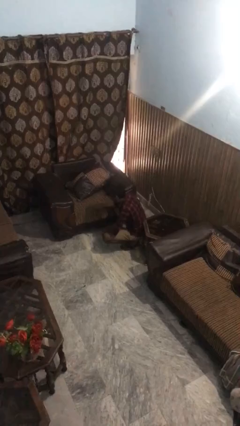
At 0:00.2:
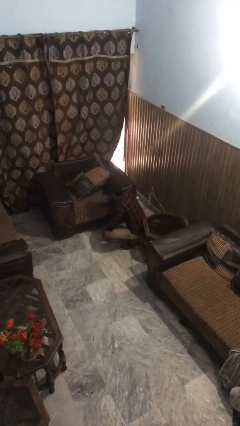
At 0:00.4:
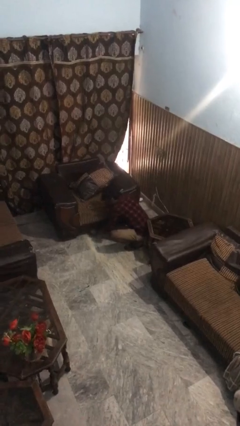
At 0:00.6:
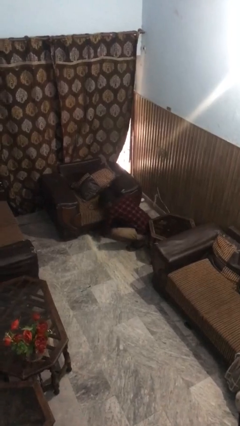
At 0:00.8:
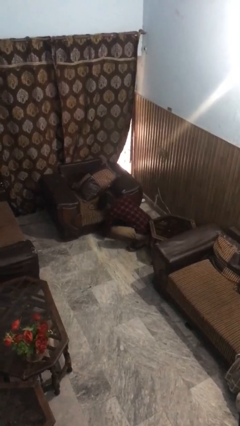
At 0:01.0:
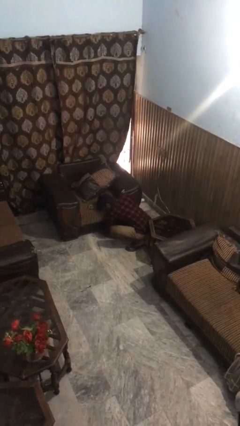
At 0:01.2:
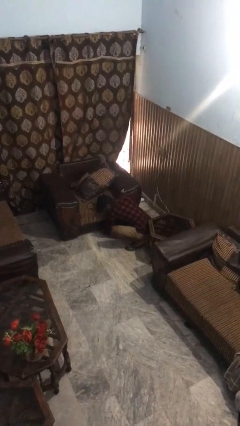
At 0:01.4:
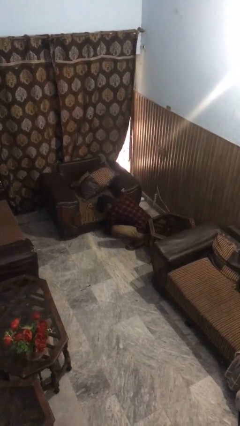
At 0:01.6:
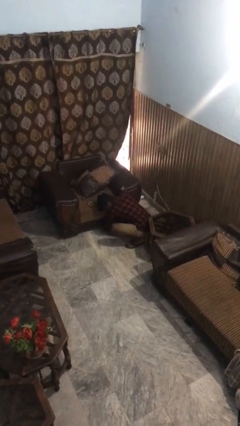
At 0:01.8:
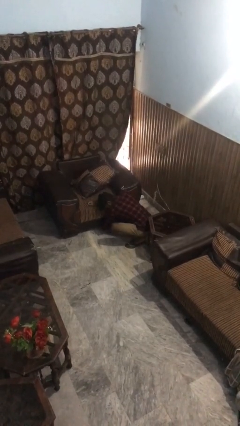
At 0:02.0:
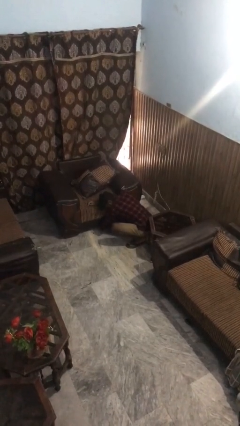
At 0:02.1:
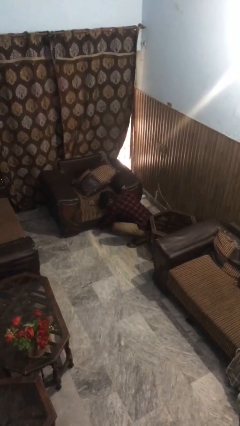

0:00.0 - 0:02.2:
person searches under couch

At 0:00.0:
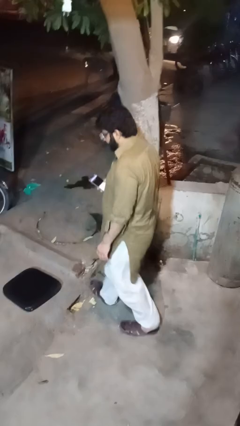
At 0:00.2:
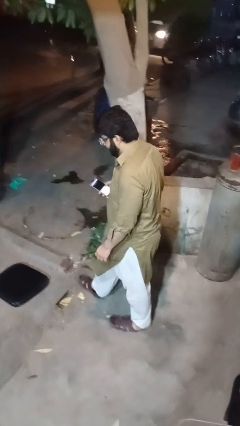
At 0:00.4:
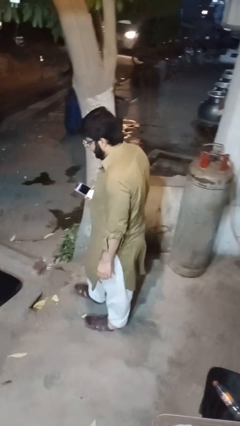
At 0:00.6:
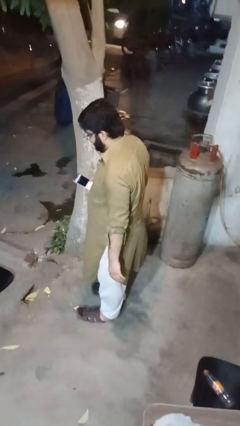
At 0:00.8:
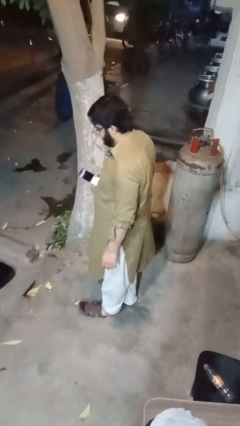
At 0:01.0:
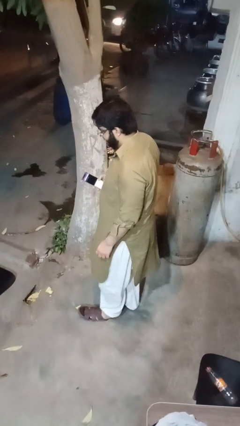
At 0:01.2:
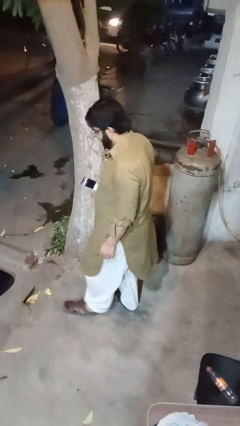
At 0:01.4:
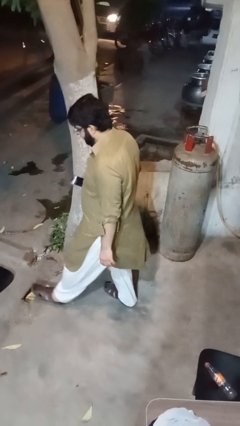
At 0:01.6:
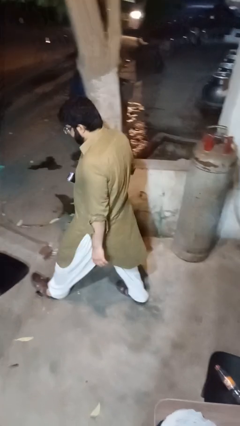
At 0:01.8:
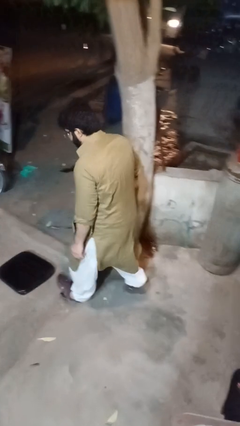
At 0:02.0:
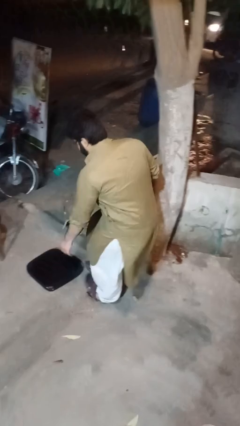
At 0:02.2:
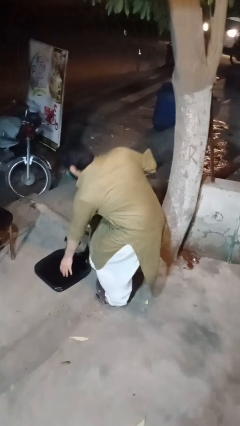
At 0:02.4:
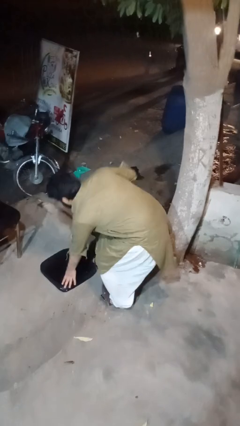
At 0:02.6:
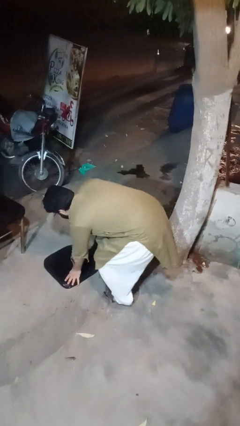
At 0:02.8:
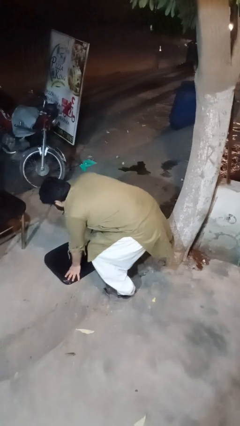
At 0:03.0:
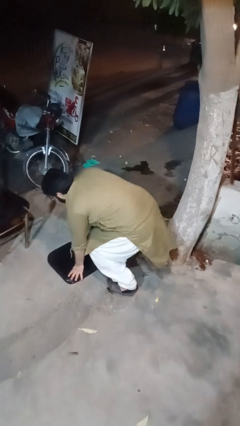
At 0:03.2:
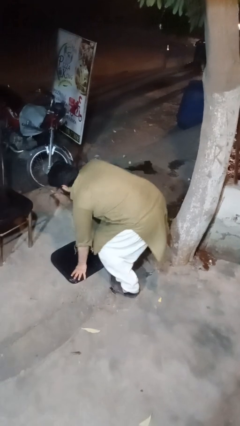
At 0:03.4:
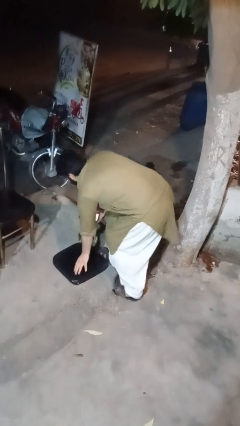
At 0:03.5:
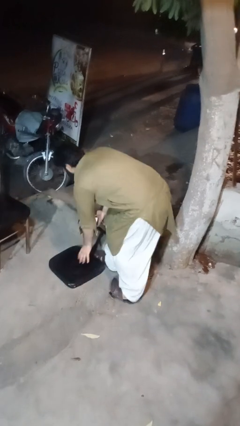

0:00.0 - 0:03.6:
person trips on object on floor

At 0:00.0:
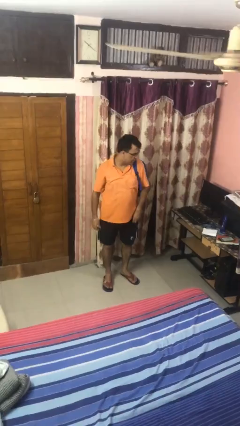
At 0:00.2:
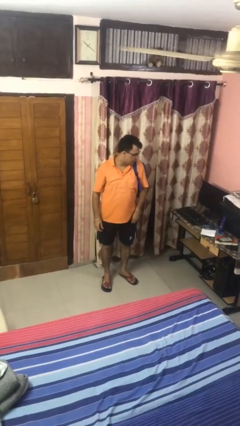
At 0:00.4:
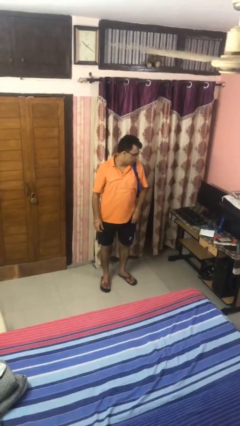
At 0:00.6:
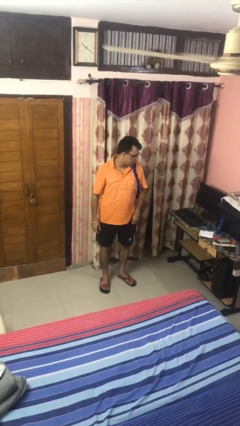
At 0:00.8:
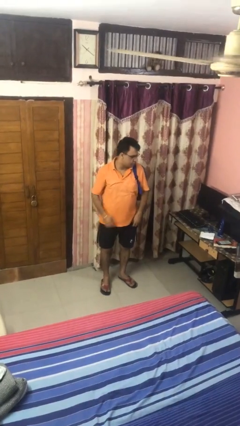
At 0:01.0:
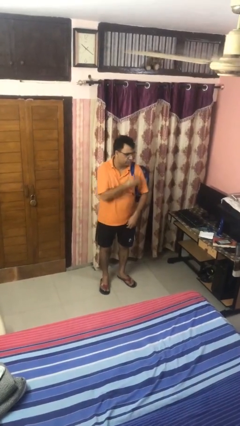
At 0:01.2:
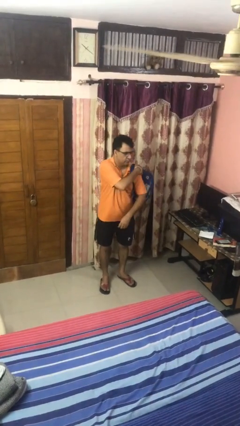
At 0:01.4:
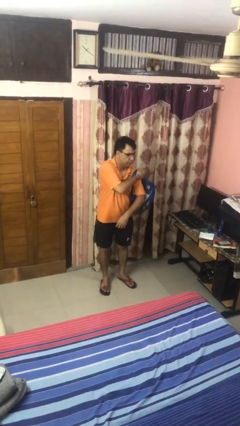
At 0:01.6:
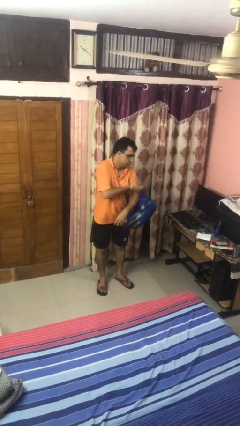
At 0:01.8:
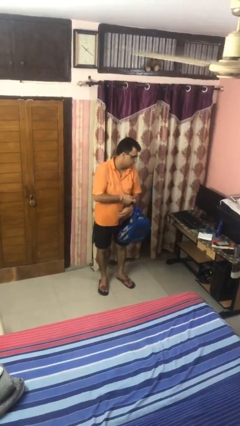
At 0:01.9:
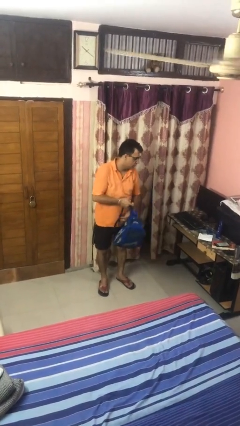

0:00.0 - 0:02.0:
person takes off backpack

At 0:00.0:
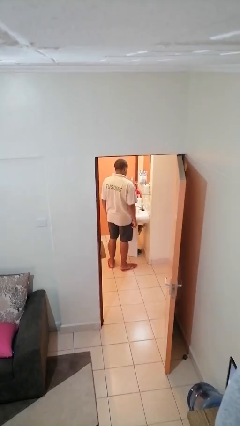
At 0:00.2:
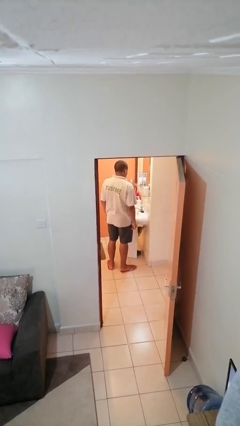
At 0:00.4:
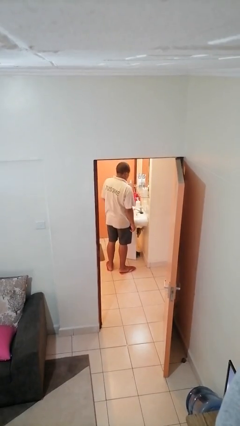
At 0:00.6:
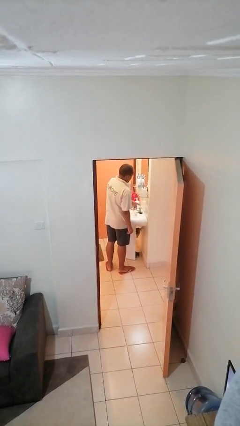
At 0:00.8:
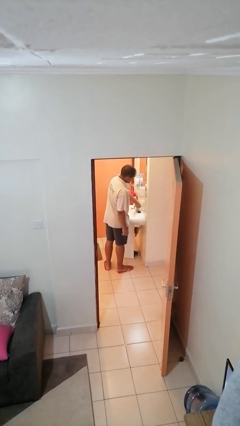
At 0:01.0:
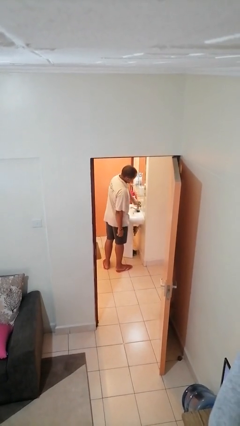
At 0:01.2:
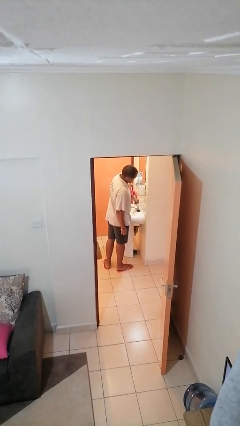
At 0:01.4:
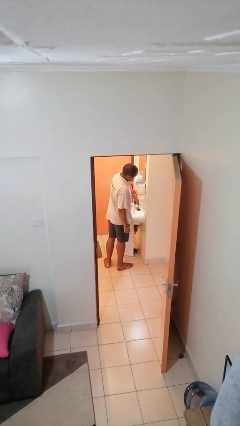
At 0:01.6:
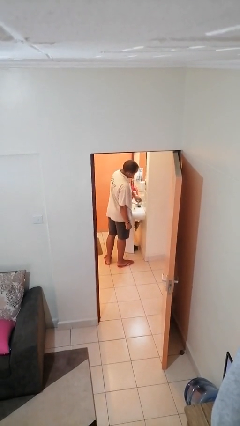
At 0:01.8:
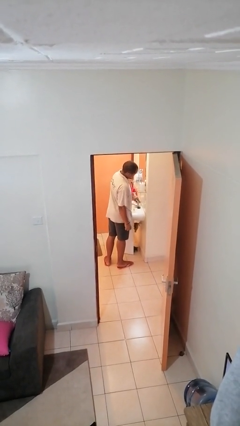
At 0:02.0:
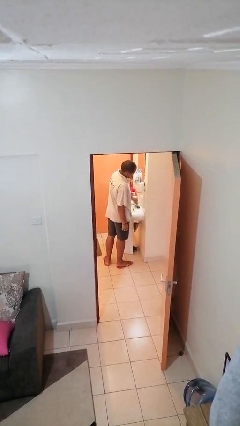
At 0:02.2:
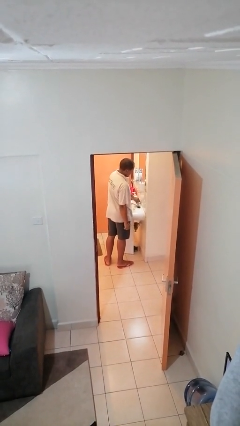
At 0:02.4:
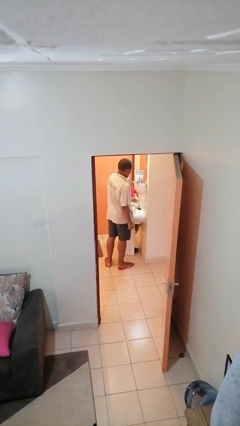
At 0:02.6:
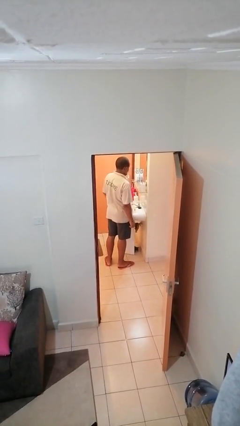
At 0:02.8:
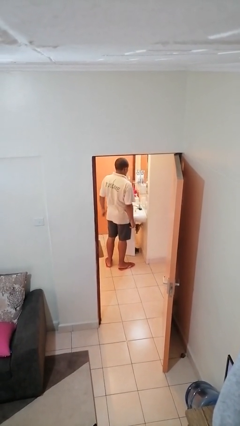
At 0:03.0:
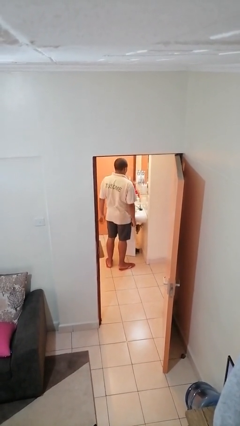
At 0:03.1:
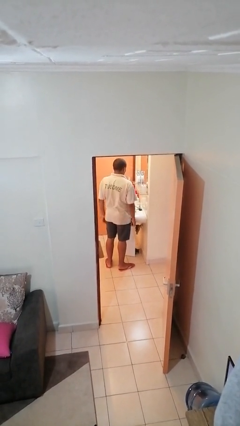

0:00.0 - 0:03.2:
person turns off faucet

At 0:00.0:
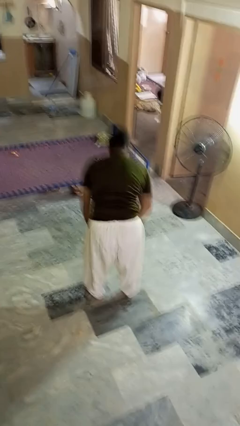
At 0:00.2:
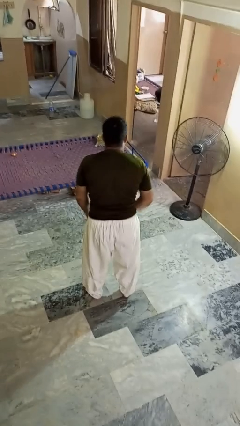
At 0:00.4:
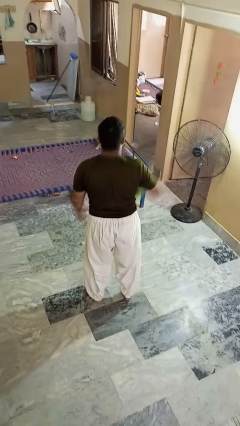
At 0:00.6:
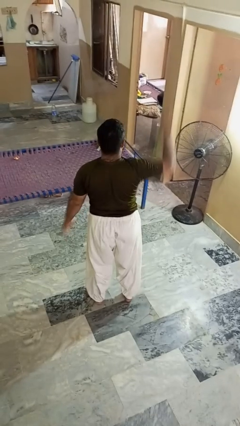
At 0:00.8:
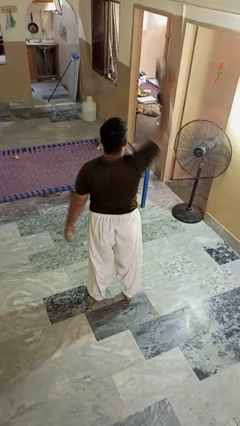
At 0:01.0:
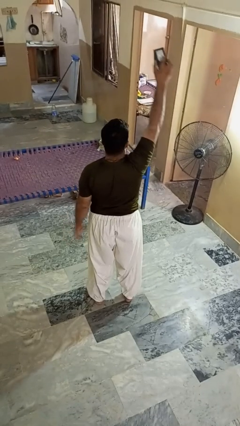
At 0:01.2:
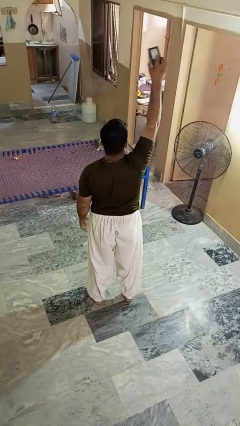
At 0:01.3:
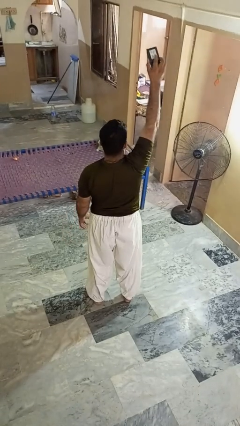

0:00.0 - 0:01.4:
person picks up object from floor

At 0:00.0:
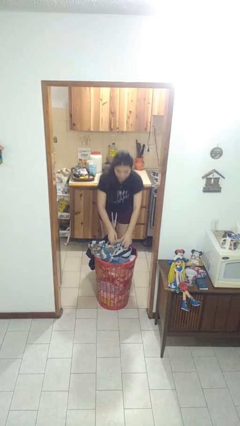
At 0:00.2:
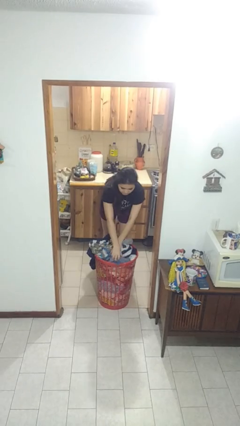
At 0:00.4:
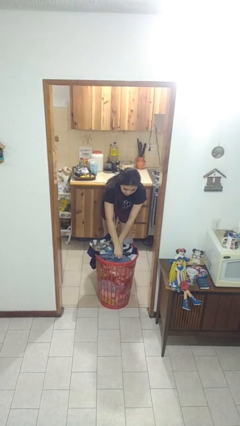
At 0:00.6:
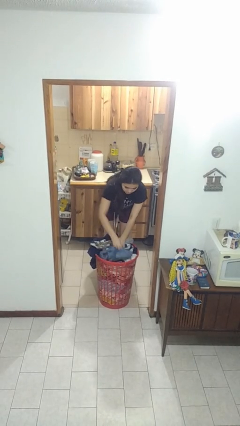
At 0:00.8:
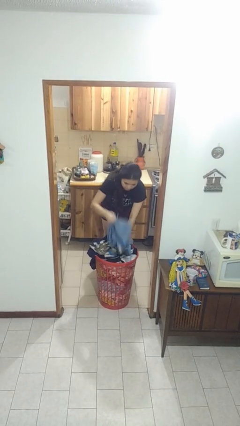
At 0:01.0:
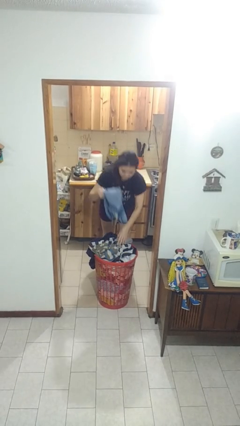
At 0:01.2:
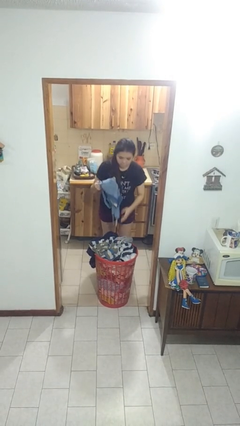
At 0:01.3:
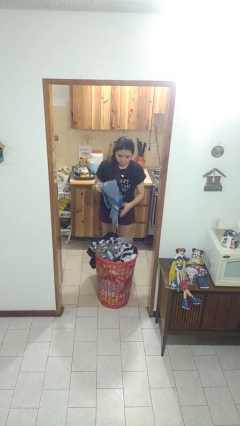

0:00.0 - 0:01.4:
person takes object from basket

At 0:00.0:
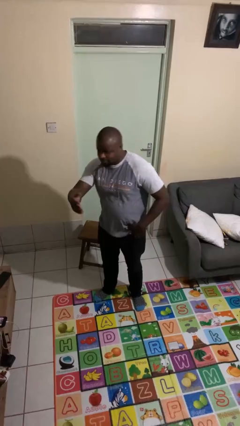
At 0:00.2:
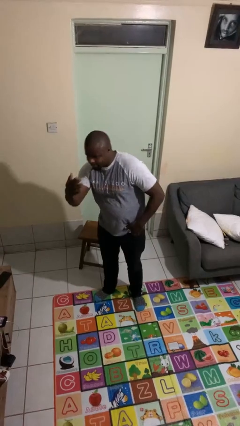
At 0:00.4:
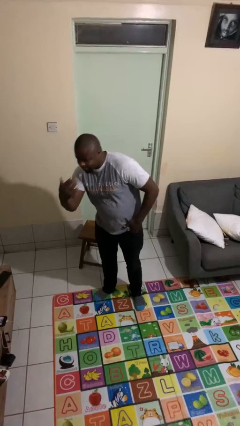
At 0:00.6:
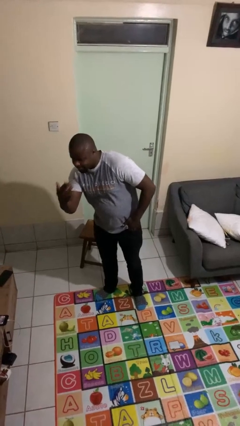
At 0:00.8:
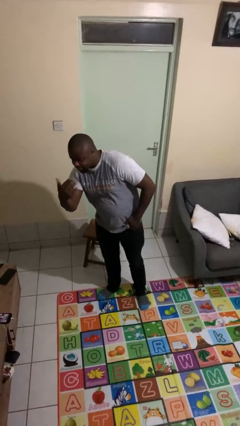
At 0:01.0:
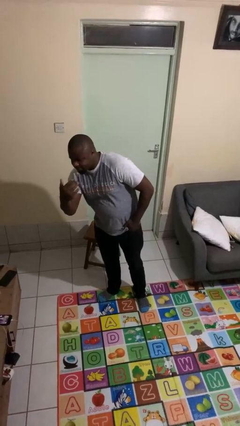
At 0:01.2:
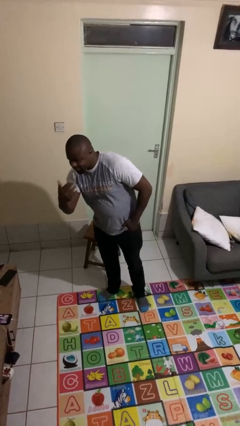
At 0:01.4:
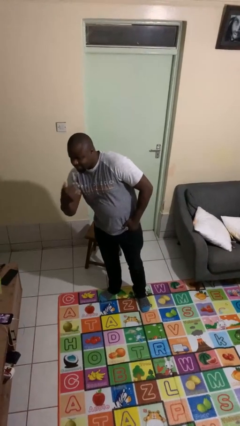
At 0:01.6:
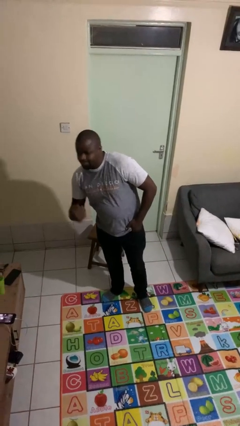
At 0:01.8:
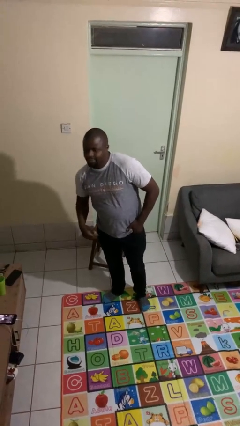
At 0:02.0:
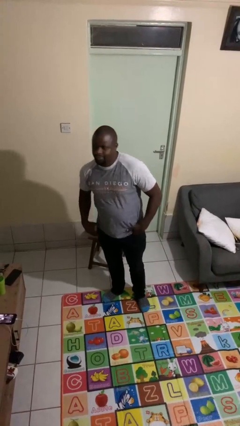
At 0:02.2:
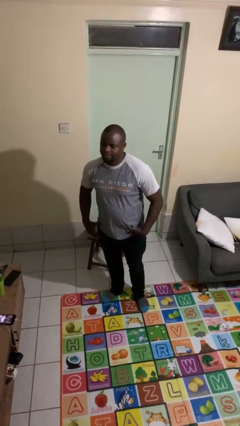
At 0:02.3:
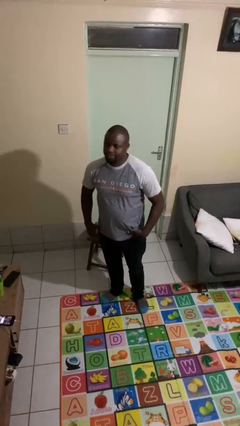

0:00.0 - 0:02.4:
person gestures come here

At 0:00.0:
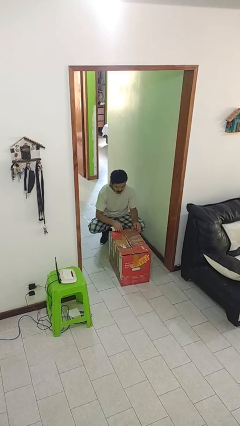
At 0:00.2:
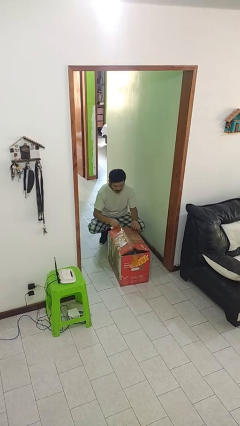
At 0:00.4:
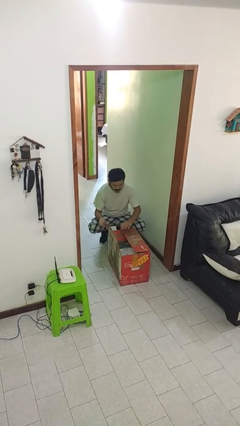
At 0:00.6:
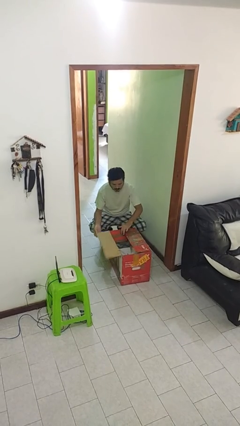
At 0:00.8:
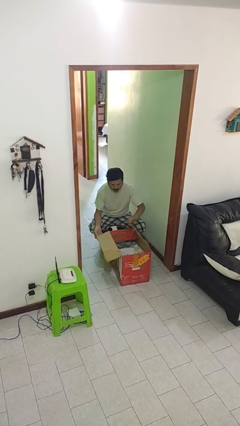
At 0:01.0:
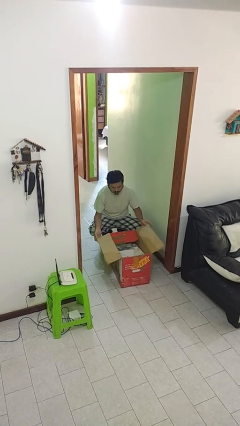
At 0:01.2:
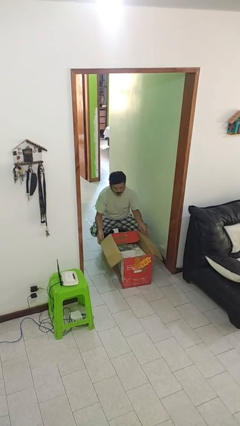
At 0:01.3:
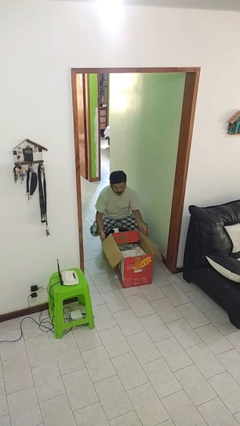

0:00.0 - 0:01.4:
person opens box
